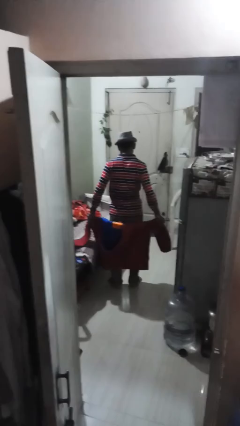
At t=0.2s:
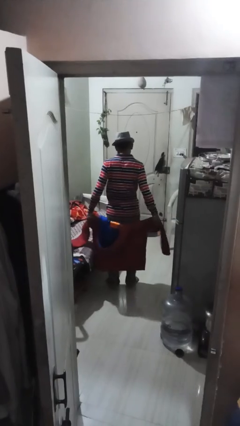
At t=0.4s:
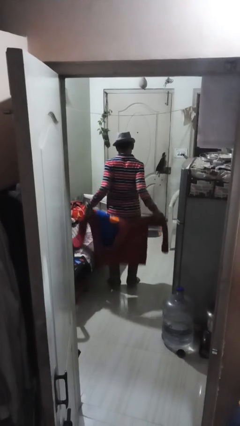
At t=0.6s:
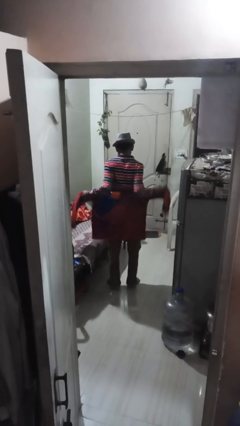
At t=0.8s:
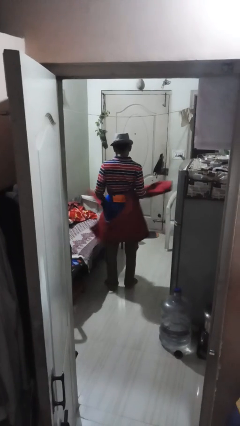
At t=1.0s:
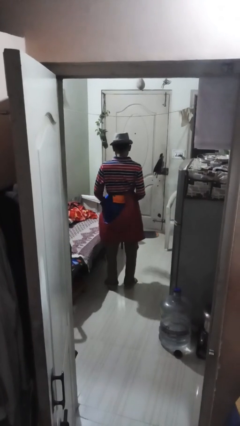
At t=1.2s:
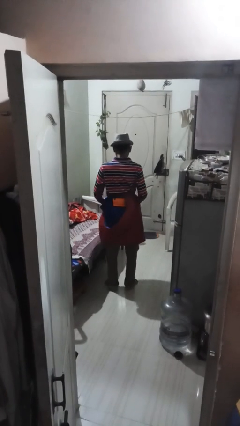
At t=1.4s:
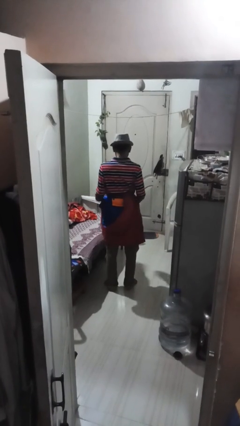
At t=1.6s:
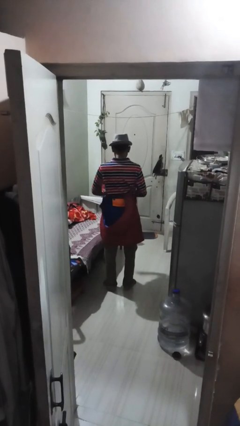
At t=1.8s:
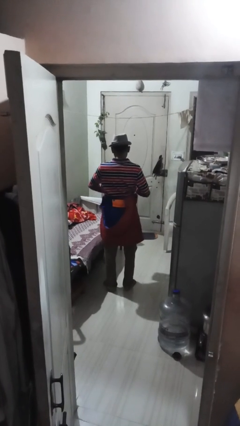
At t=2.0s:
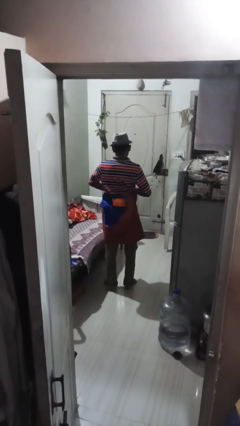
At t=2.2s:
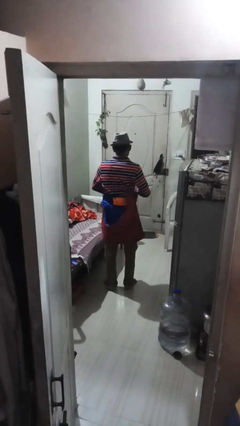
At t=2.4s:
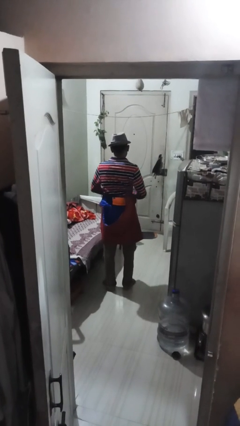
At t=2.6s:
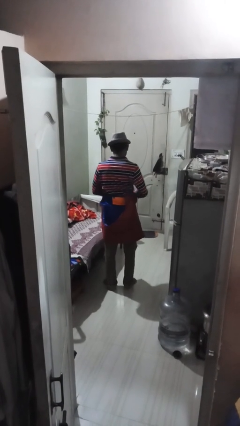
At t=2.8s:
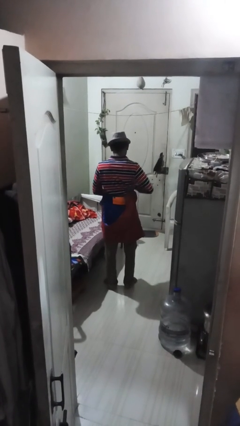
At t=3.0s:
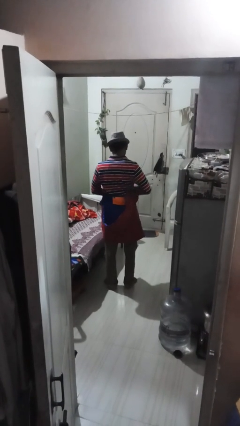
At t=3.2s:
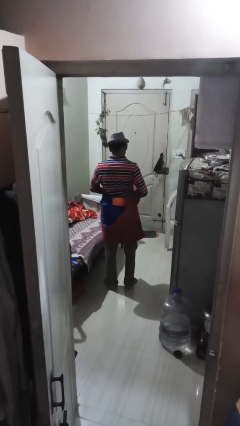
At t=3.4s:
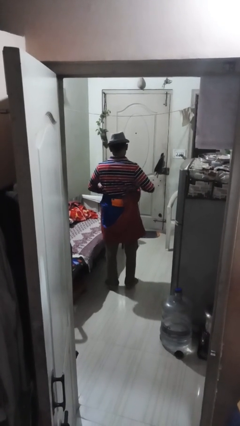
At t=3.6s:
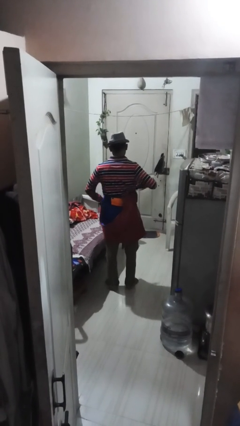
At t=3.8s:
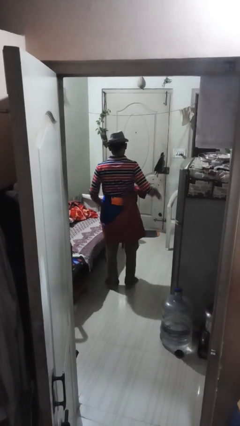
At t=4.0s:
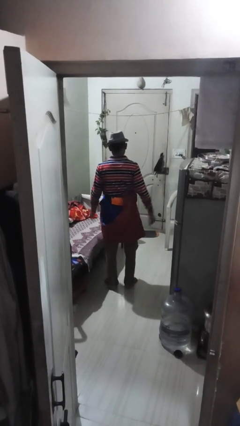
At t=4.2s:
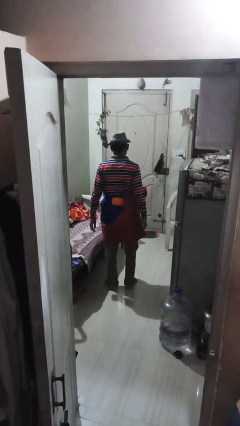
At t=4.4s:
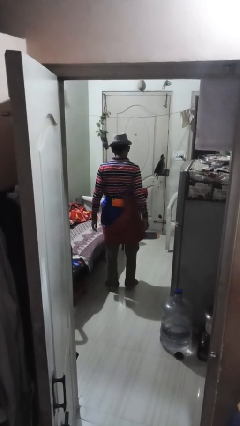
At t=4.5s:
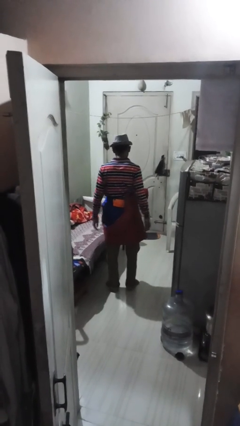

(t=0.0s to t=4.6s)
person ties jacket around waist

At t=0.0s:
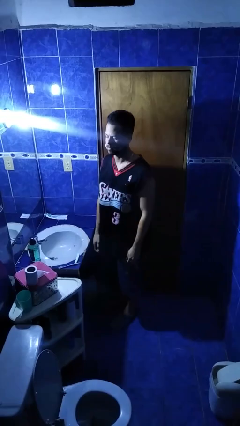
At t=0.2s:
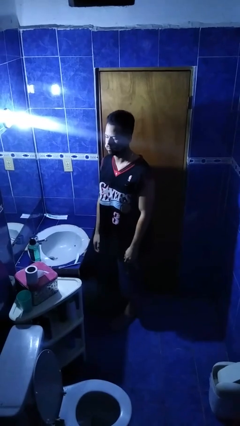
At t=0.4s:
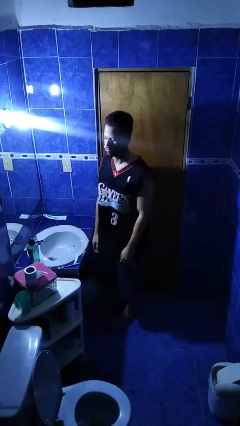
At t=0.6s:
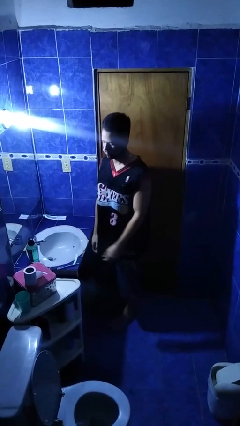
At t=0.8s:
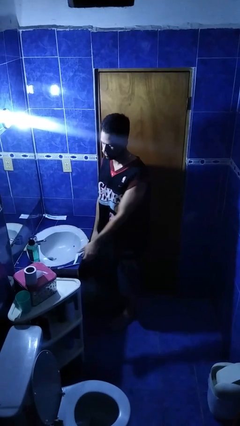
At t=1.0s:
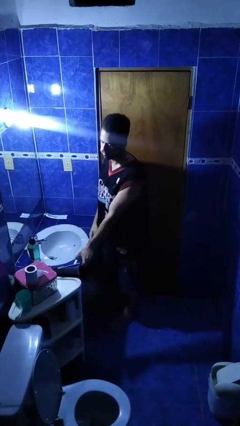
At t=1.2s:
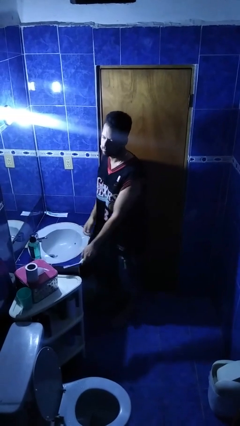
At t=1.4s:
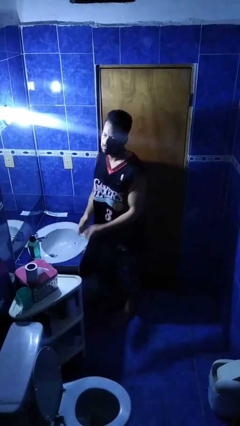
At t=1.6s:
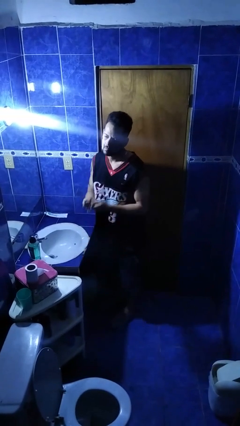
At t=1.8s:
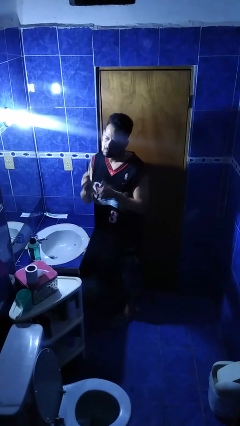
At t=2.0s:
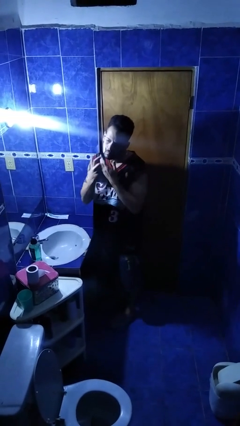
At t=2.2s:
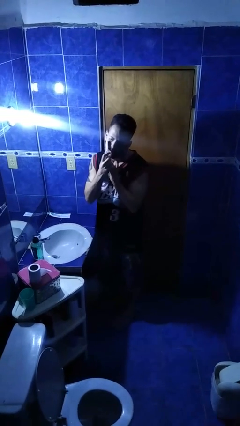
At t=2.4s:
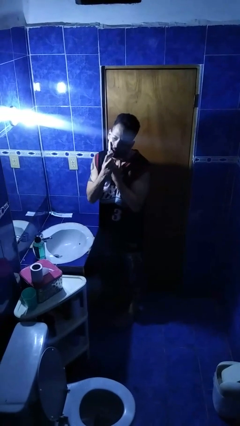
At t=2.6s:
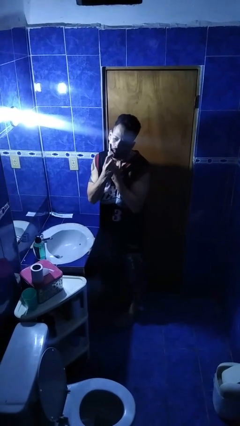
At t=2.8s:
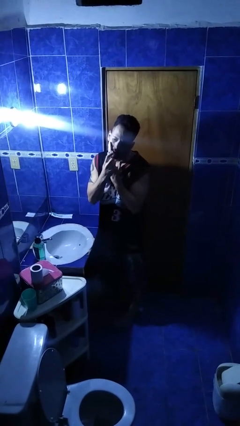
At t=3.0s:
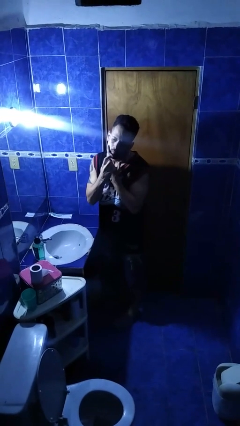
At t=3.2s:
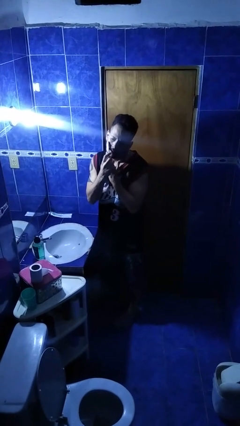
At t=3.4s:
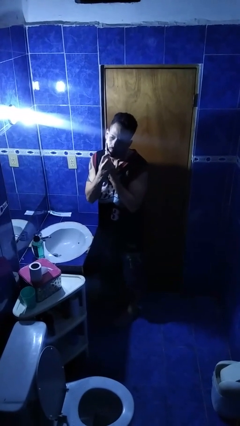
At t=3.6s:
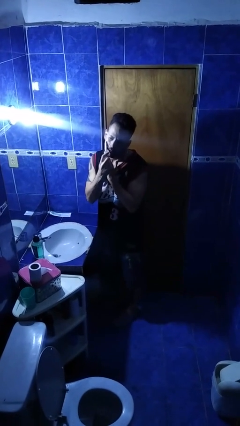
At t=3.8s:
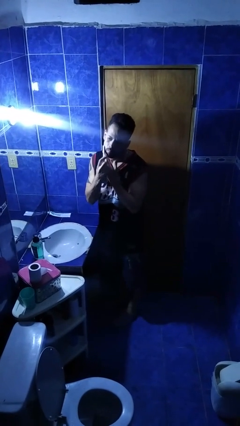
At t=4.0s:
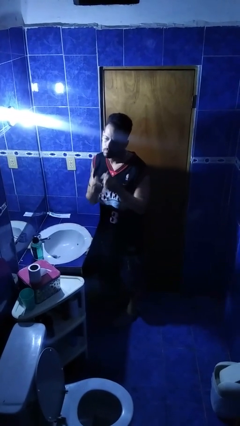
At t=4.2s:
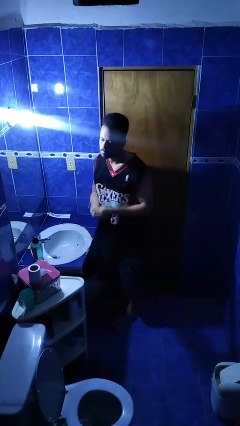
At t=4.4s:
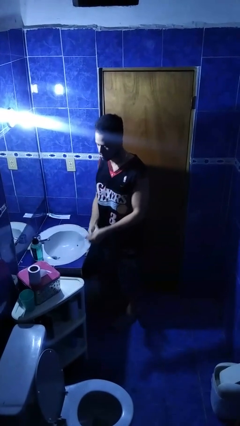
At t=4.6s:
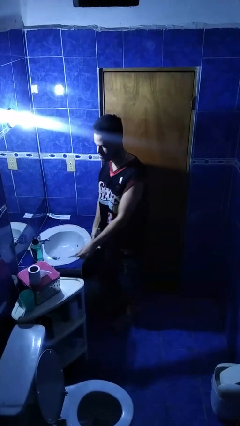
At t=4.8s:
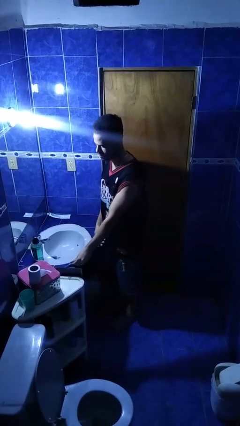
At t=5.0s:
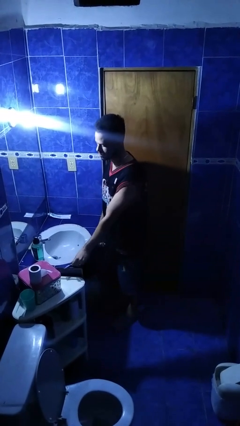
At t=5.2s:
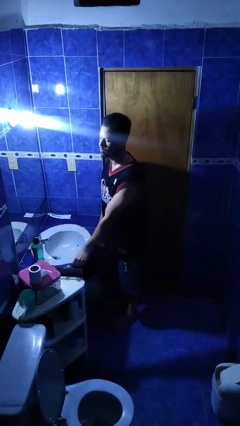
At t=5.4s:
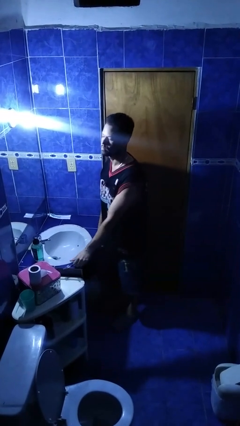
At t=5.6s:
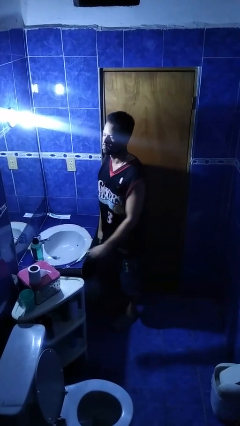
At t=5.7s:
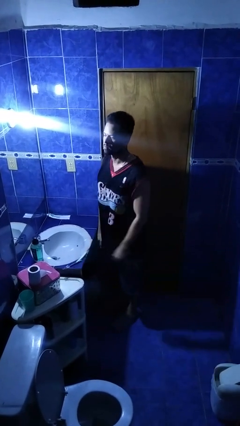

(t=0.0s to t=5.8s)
person shaves face

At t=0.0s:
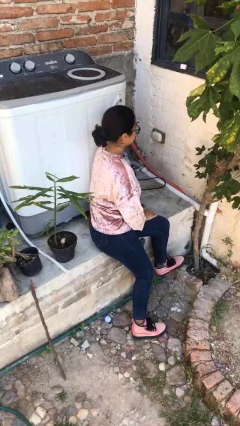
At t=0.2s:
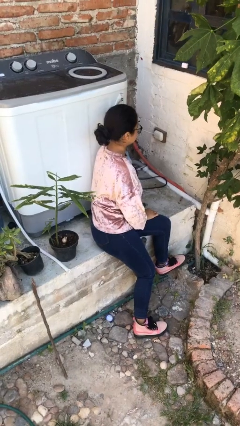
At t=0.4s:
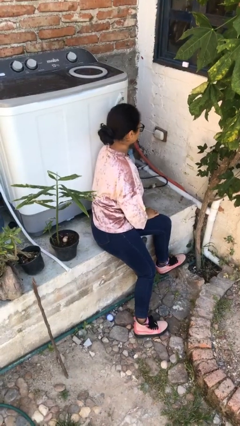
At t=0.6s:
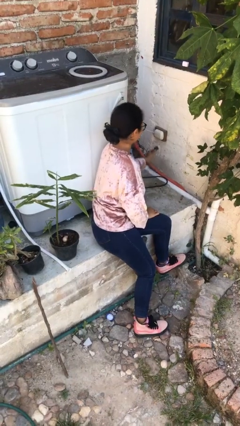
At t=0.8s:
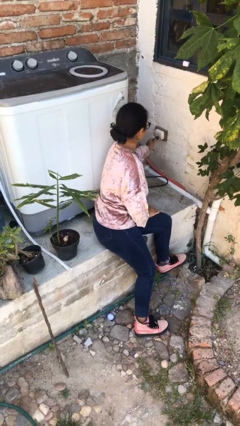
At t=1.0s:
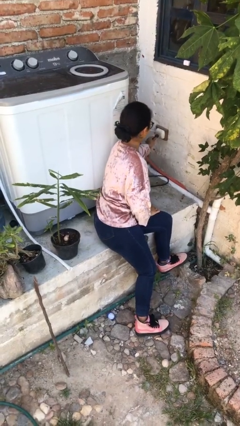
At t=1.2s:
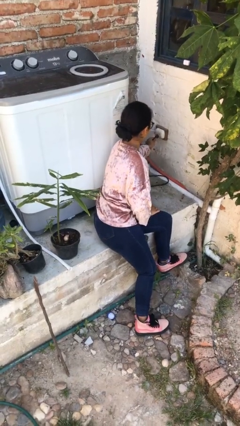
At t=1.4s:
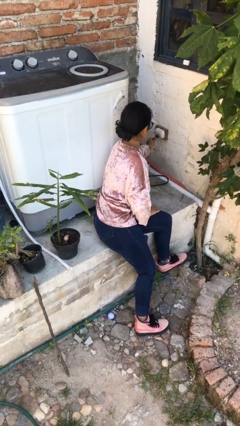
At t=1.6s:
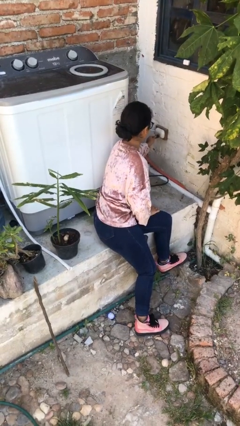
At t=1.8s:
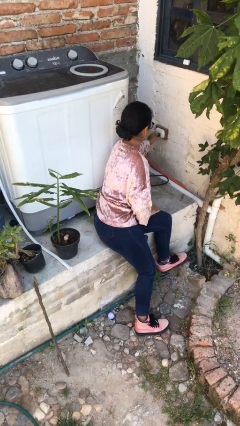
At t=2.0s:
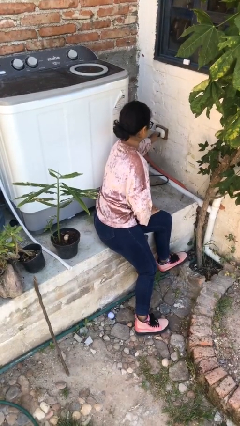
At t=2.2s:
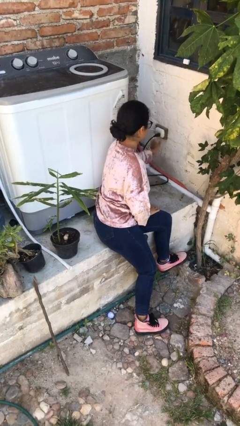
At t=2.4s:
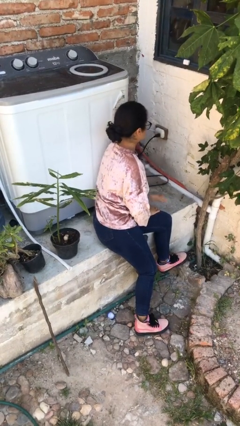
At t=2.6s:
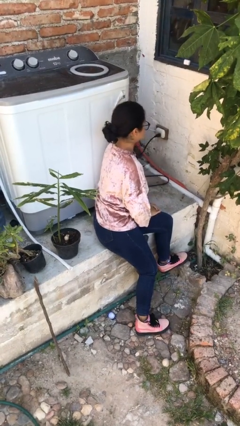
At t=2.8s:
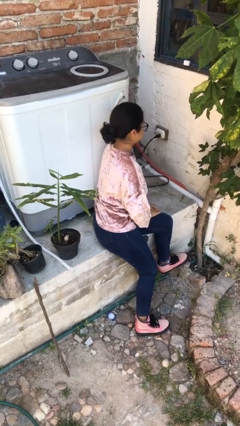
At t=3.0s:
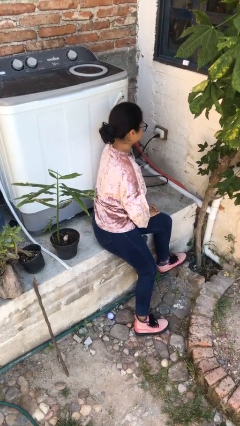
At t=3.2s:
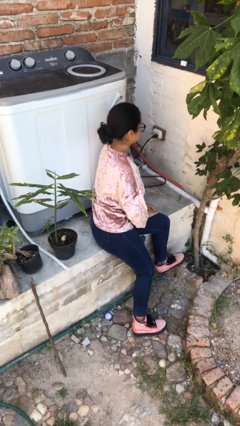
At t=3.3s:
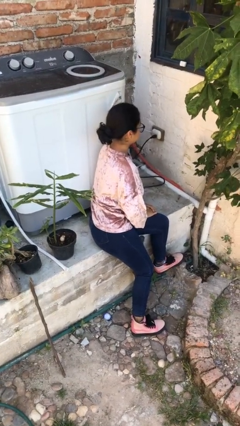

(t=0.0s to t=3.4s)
person plugs into electrical socket

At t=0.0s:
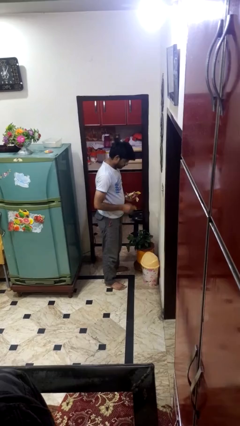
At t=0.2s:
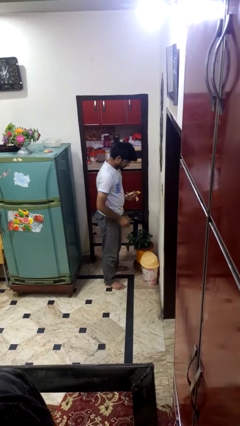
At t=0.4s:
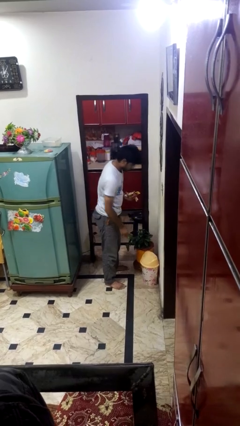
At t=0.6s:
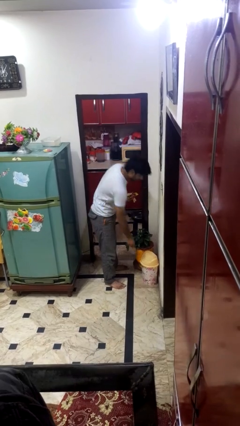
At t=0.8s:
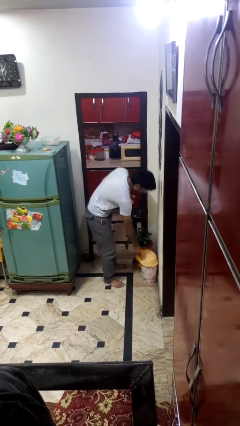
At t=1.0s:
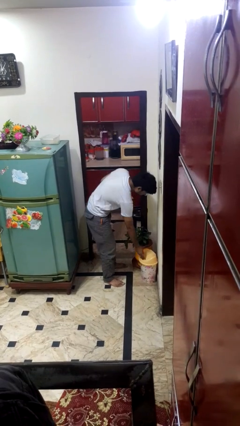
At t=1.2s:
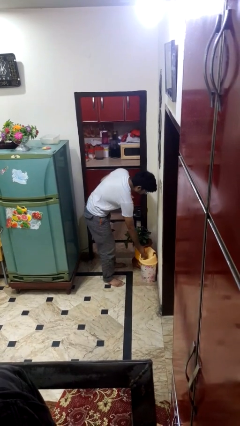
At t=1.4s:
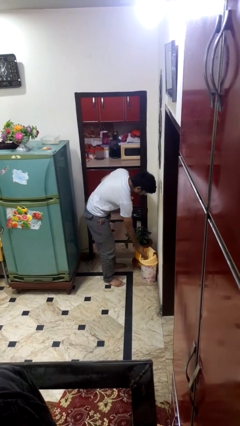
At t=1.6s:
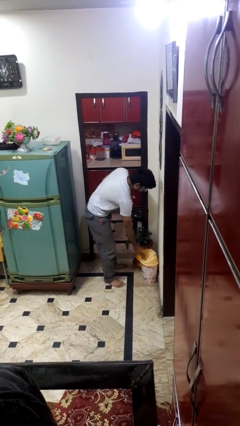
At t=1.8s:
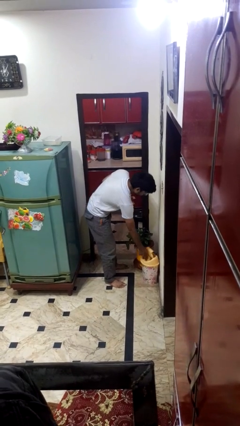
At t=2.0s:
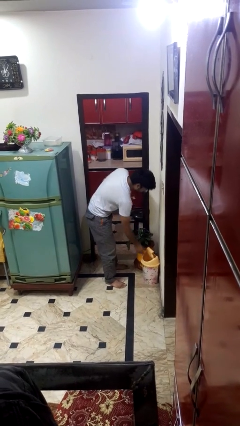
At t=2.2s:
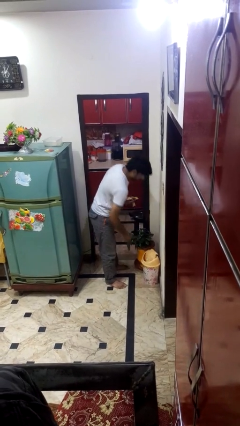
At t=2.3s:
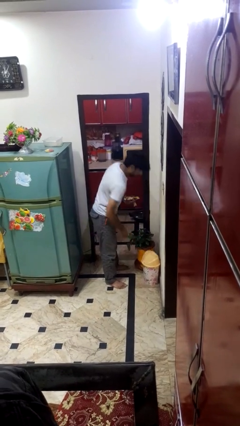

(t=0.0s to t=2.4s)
person discards trash

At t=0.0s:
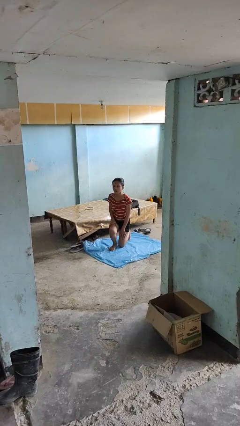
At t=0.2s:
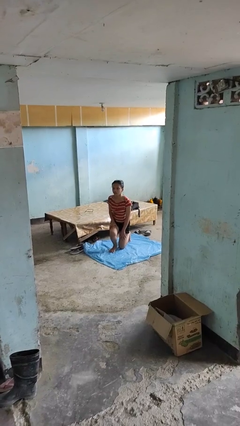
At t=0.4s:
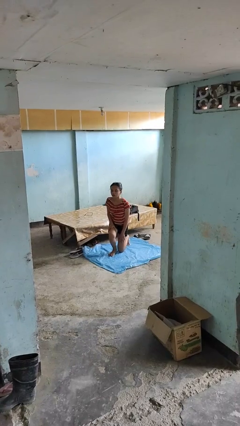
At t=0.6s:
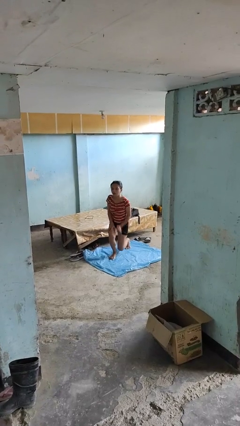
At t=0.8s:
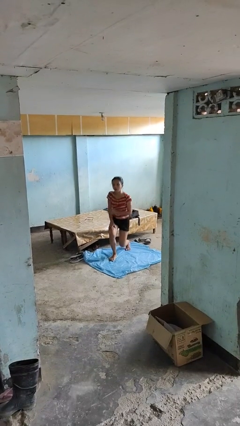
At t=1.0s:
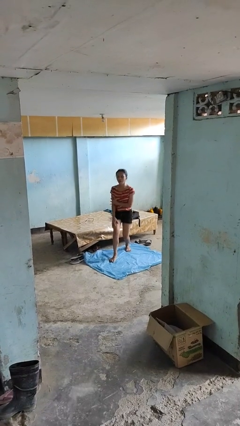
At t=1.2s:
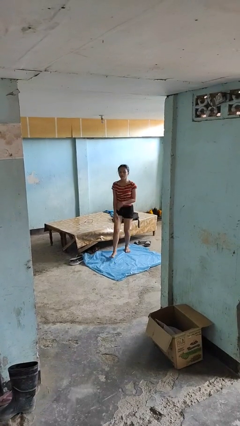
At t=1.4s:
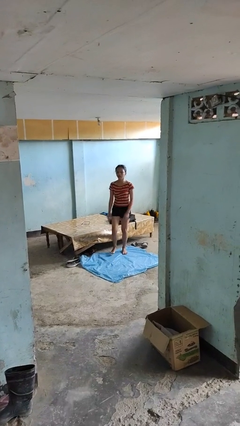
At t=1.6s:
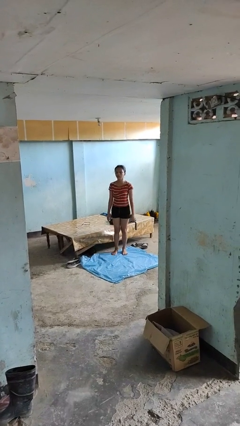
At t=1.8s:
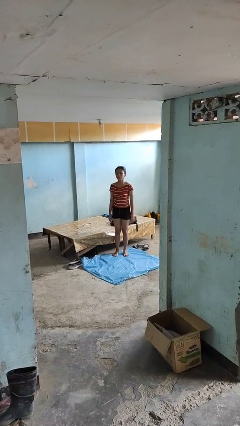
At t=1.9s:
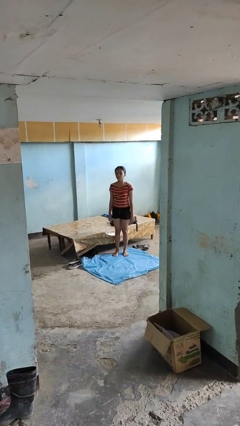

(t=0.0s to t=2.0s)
person stands up from floor
